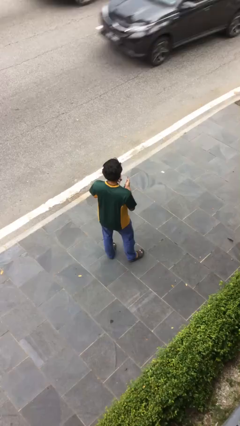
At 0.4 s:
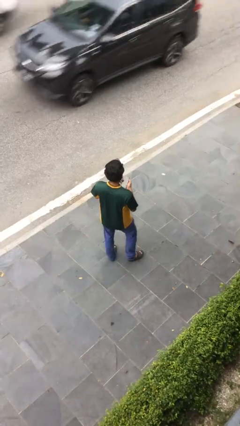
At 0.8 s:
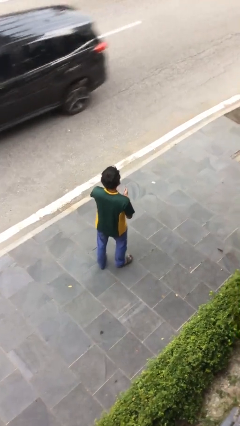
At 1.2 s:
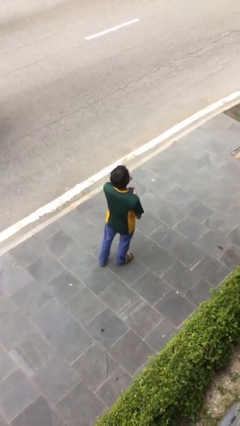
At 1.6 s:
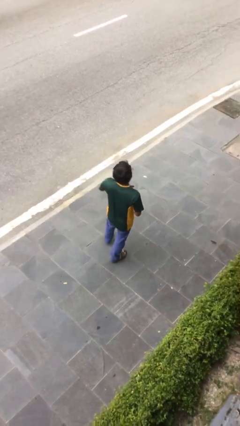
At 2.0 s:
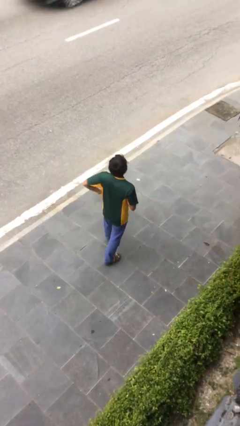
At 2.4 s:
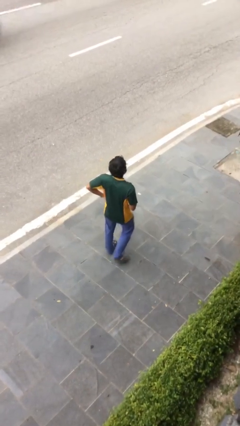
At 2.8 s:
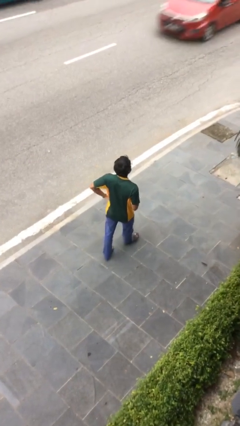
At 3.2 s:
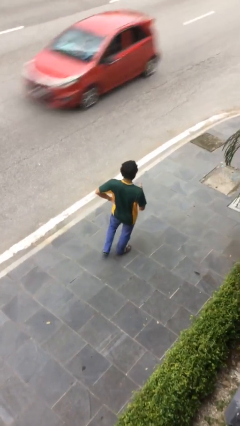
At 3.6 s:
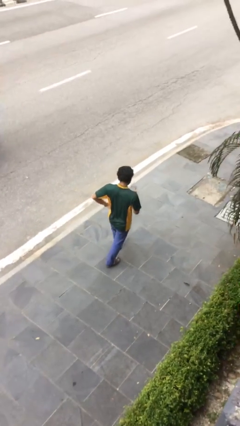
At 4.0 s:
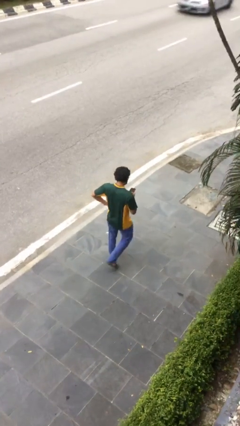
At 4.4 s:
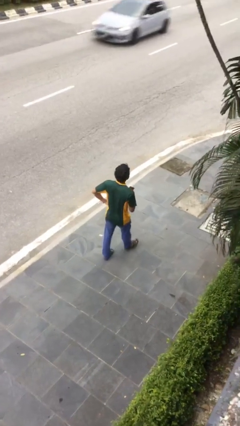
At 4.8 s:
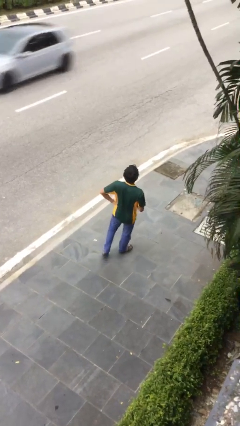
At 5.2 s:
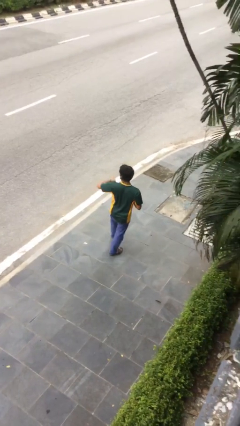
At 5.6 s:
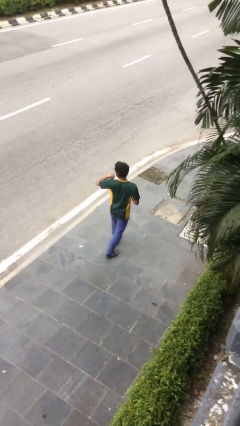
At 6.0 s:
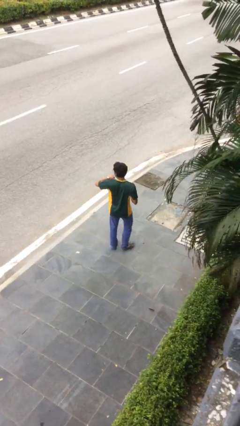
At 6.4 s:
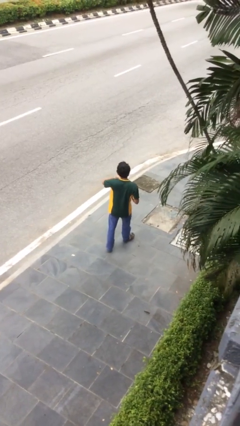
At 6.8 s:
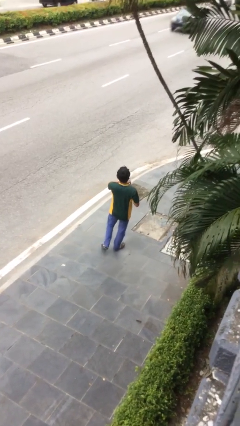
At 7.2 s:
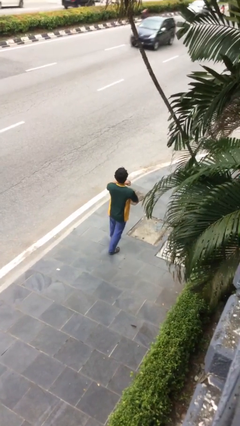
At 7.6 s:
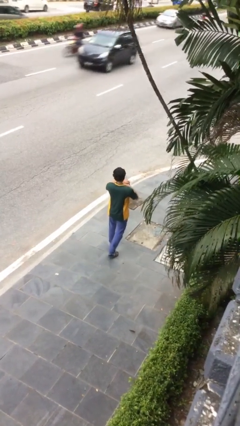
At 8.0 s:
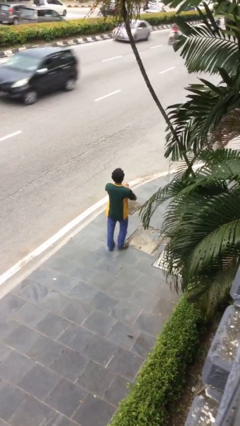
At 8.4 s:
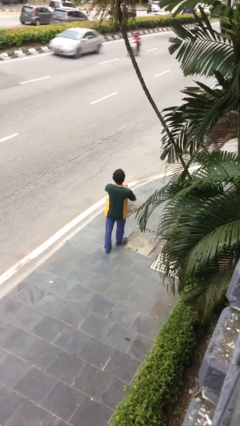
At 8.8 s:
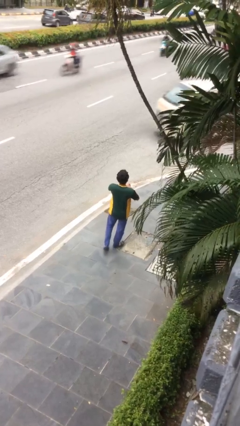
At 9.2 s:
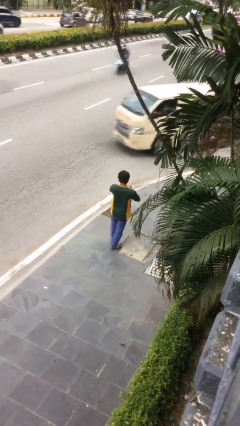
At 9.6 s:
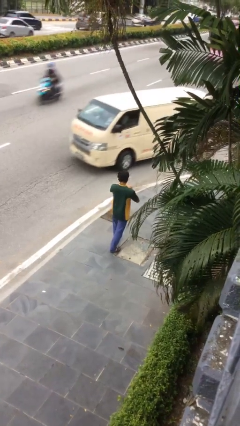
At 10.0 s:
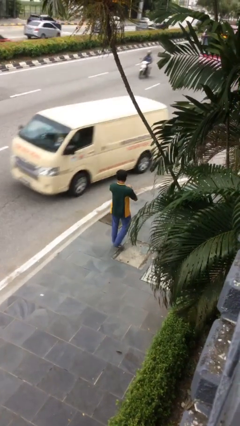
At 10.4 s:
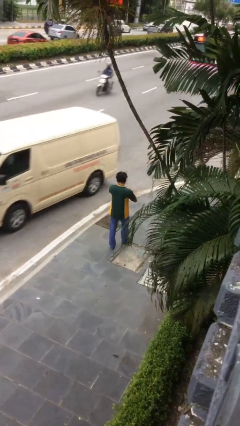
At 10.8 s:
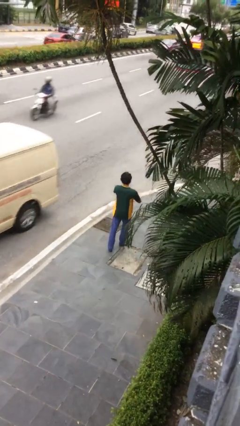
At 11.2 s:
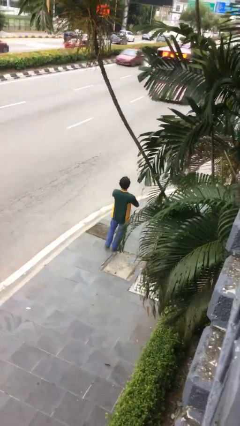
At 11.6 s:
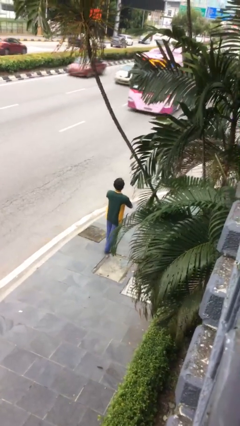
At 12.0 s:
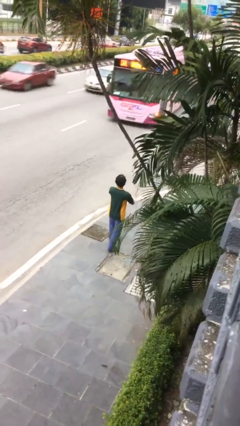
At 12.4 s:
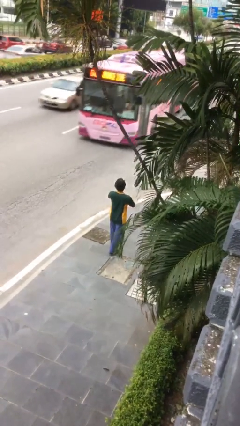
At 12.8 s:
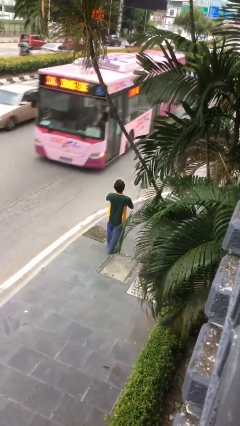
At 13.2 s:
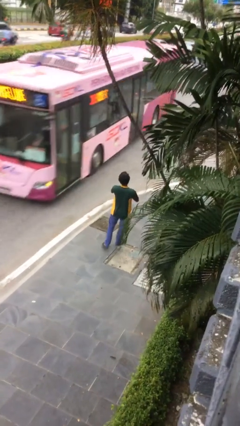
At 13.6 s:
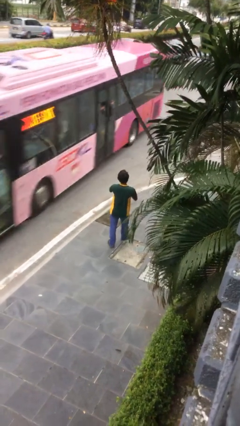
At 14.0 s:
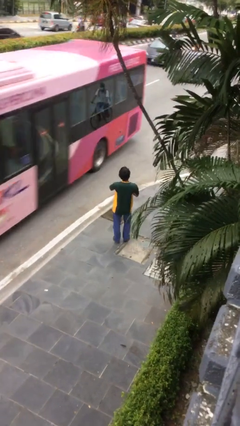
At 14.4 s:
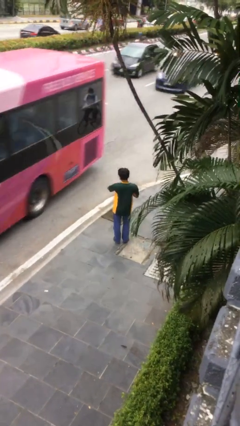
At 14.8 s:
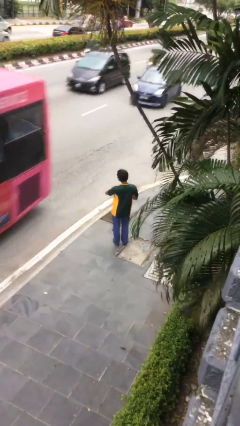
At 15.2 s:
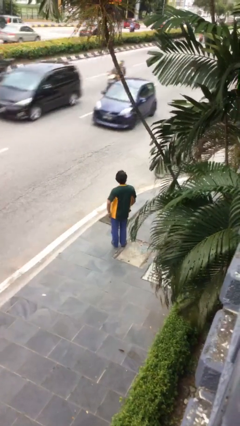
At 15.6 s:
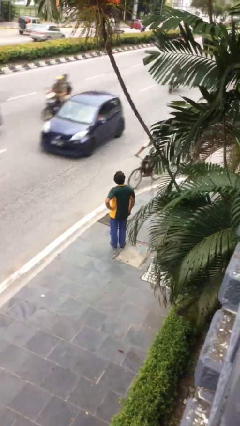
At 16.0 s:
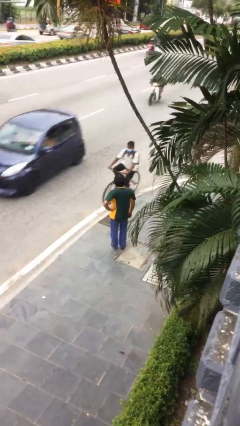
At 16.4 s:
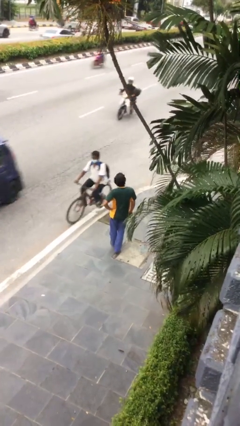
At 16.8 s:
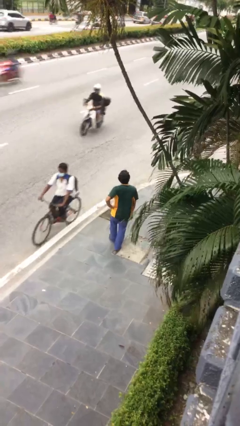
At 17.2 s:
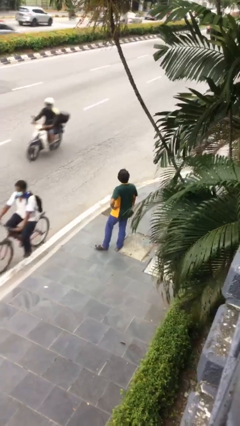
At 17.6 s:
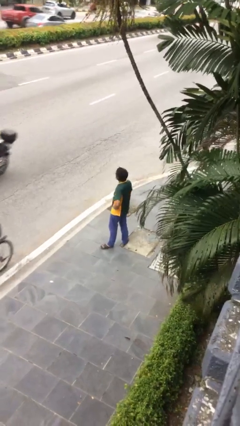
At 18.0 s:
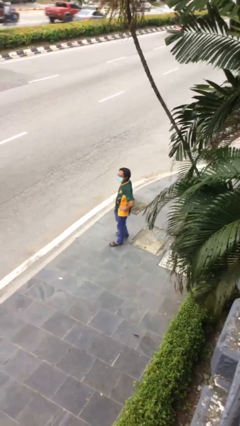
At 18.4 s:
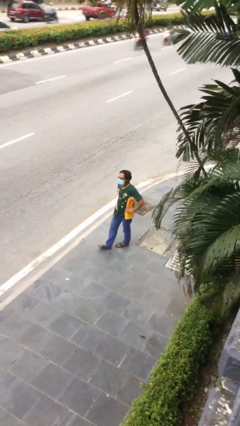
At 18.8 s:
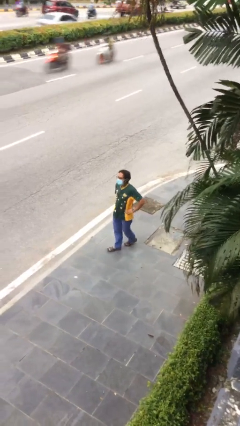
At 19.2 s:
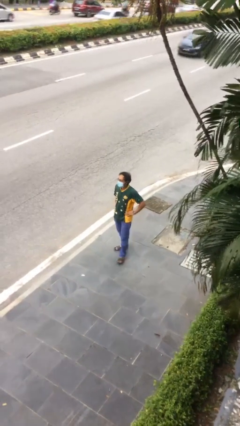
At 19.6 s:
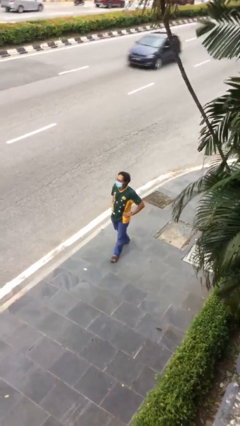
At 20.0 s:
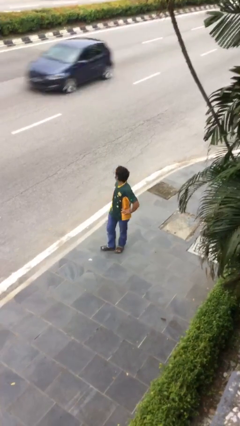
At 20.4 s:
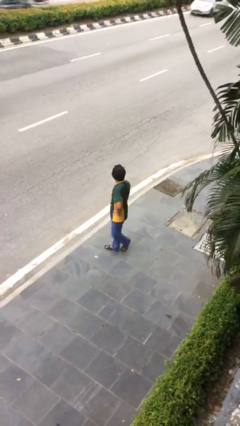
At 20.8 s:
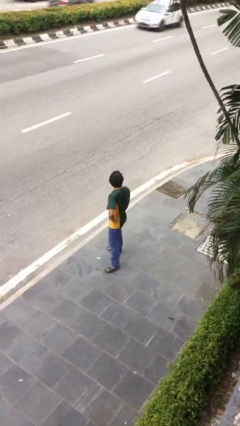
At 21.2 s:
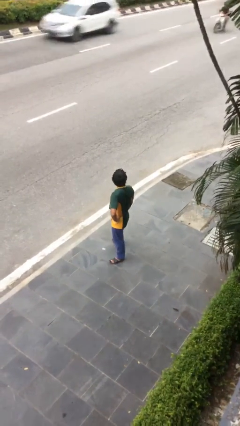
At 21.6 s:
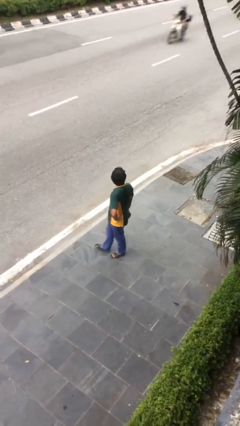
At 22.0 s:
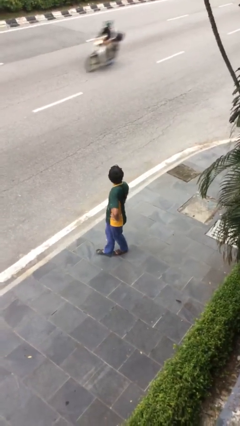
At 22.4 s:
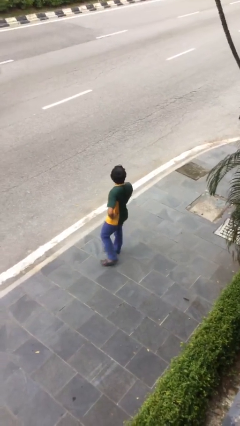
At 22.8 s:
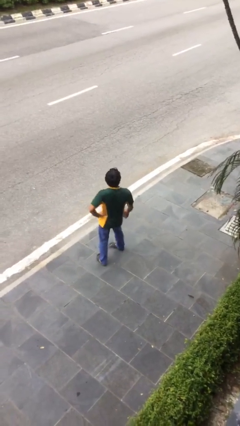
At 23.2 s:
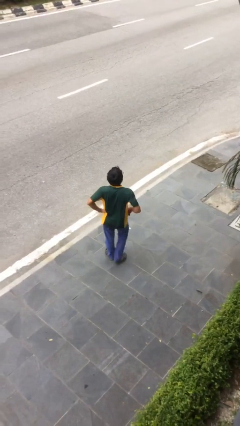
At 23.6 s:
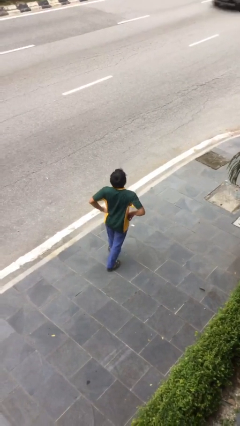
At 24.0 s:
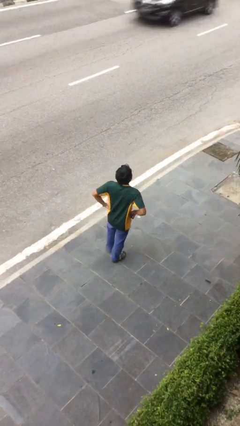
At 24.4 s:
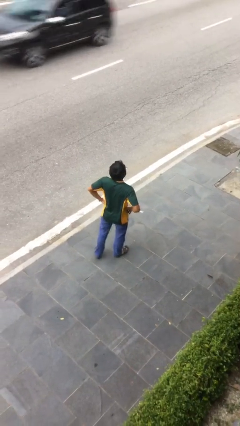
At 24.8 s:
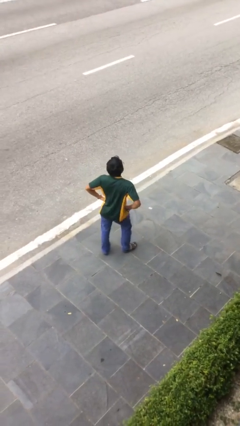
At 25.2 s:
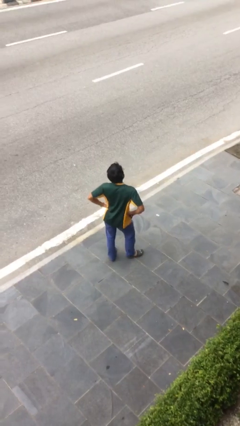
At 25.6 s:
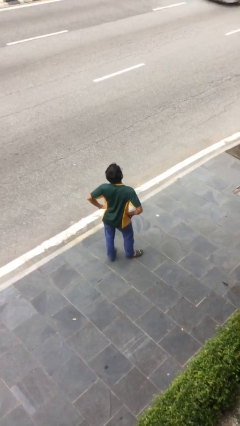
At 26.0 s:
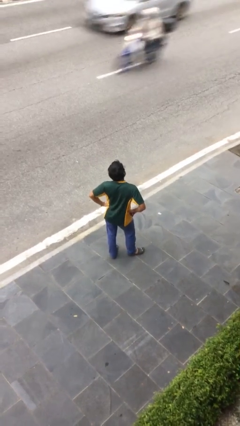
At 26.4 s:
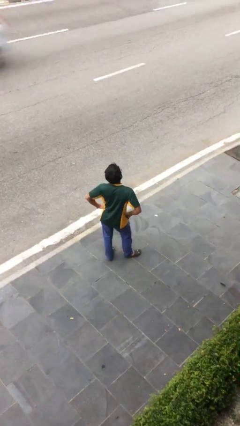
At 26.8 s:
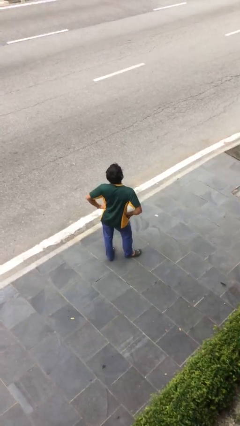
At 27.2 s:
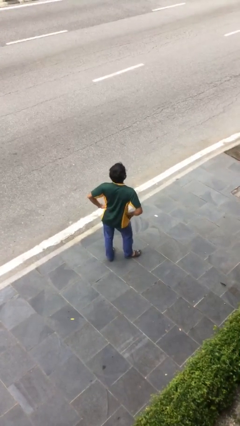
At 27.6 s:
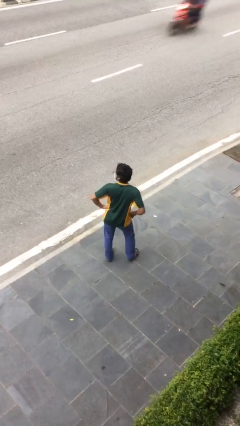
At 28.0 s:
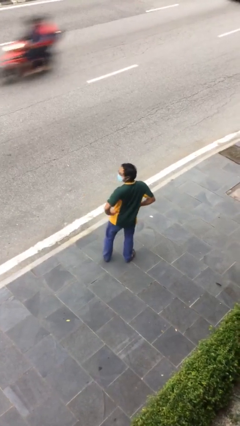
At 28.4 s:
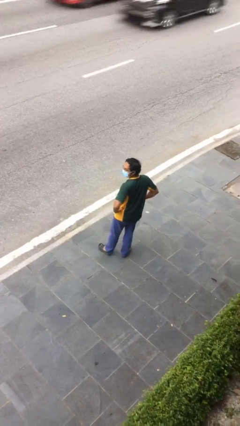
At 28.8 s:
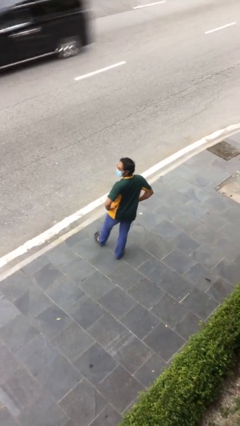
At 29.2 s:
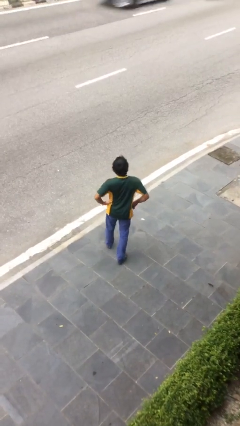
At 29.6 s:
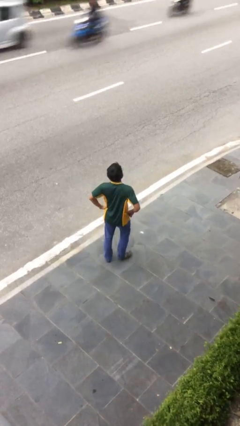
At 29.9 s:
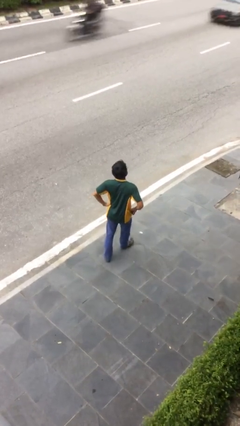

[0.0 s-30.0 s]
person walks

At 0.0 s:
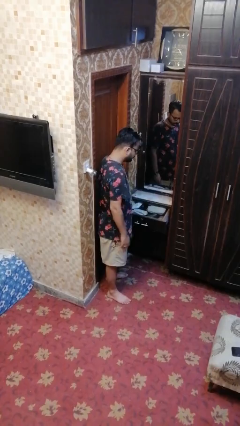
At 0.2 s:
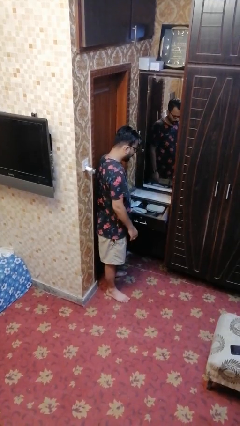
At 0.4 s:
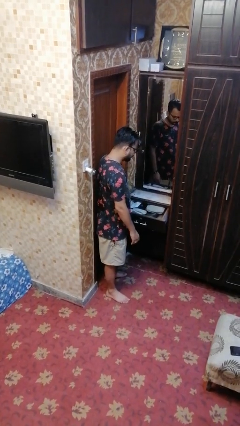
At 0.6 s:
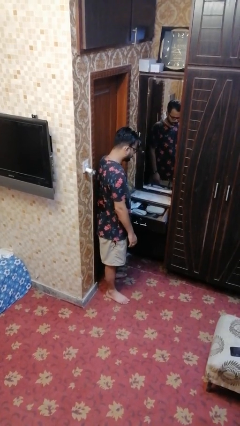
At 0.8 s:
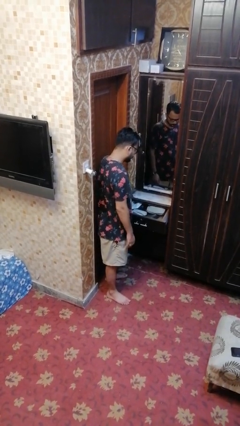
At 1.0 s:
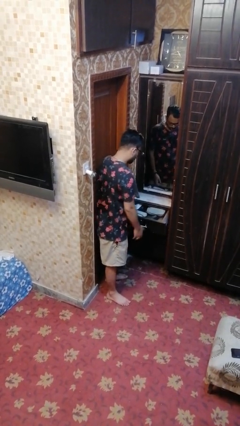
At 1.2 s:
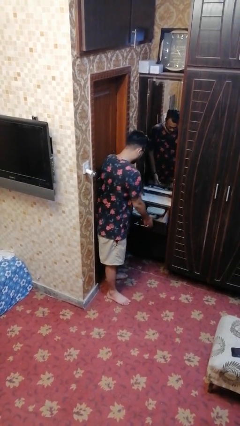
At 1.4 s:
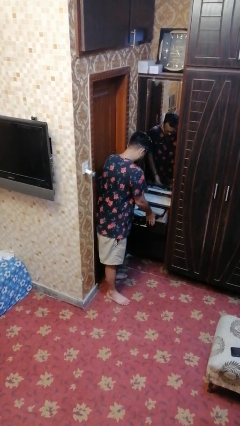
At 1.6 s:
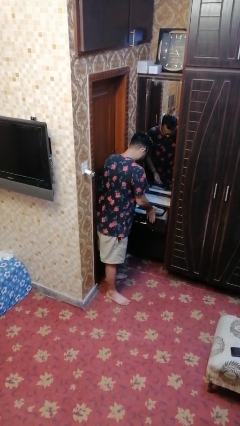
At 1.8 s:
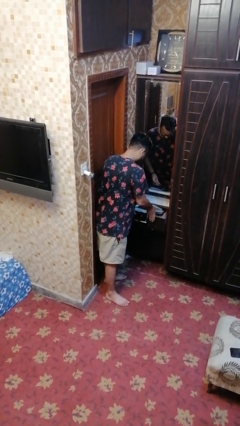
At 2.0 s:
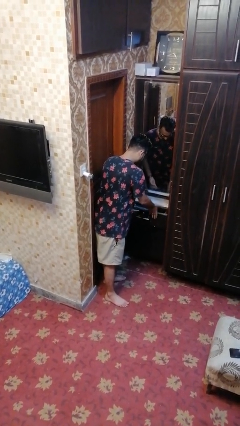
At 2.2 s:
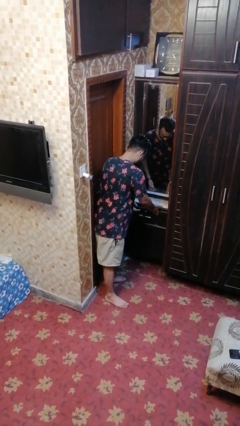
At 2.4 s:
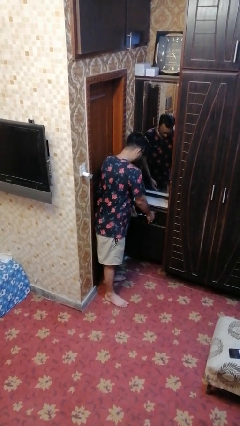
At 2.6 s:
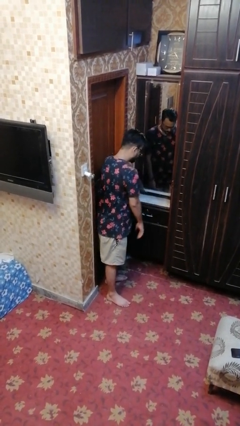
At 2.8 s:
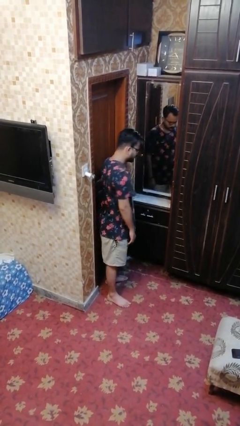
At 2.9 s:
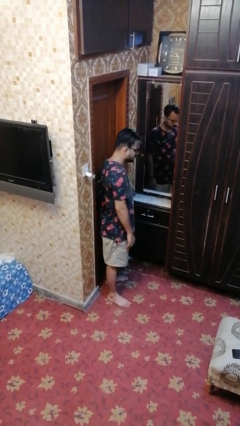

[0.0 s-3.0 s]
person closes dresser drawer

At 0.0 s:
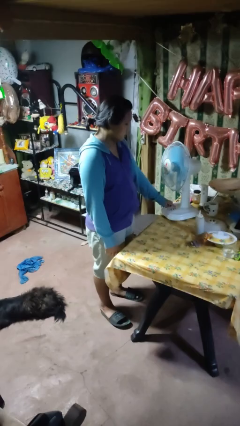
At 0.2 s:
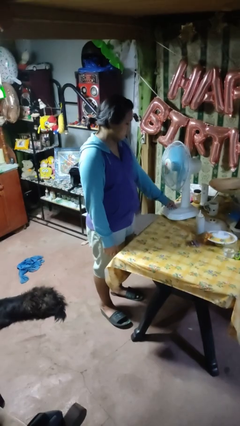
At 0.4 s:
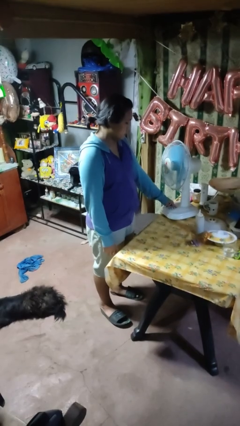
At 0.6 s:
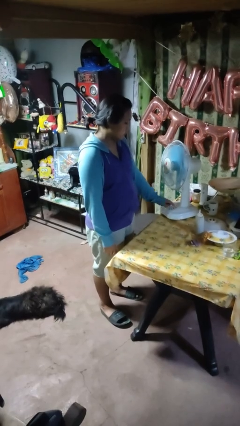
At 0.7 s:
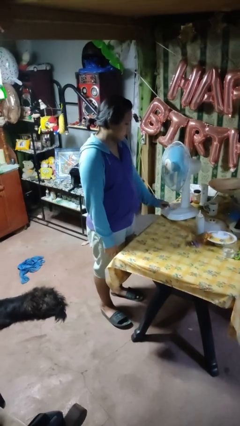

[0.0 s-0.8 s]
person turns off fan
